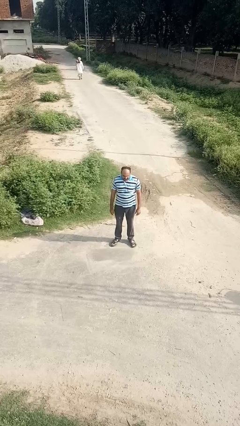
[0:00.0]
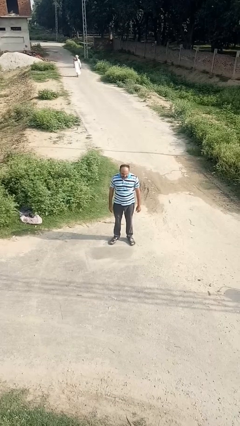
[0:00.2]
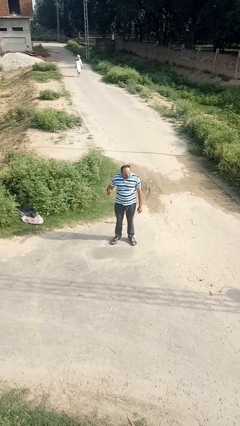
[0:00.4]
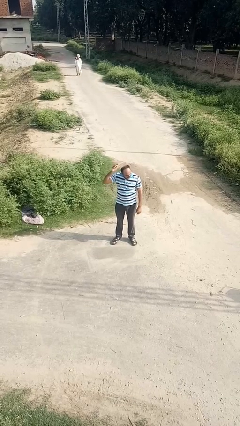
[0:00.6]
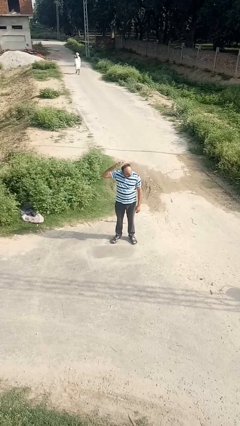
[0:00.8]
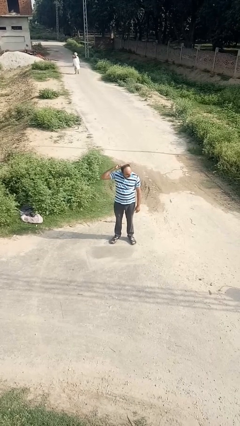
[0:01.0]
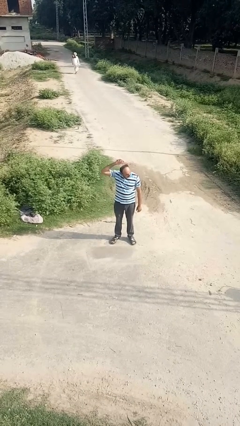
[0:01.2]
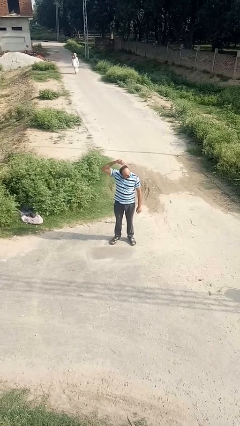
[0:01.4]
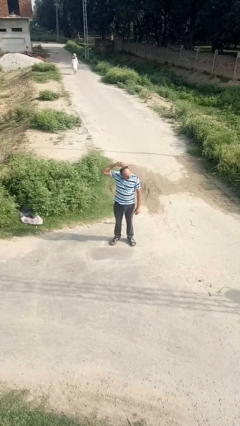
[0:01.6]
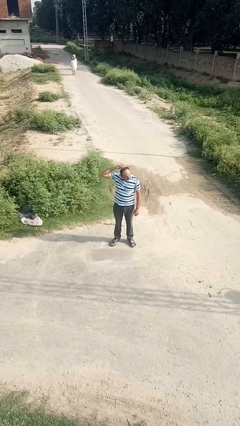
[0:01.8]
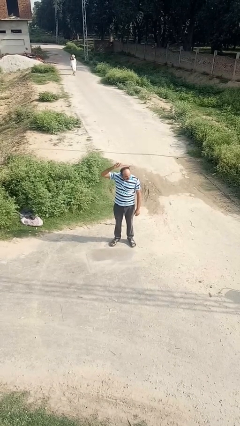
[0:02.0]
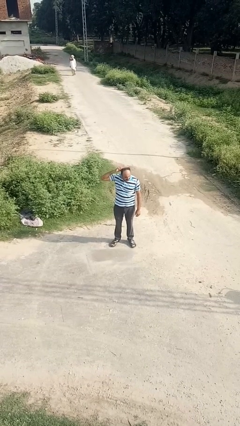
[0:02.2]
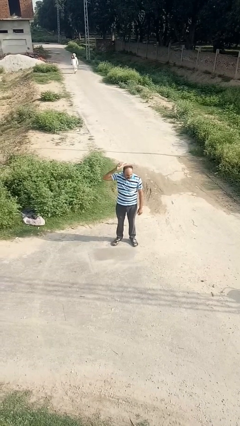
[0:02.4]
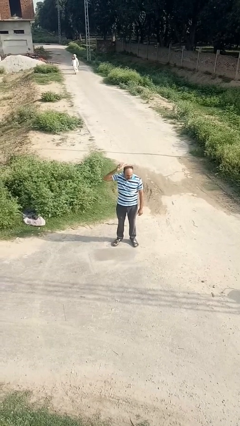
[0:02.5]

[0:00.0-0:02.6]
person brushes hair

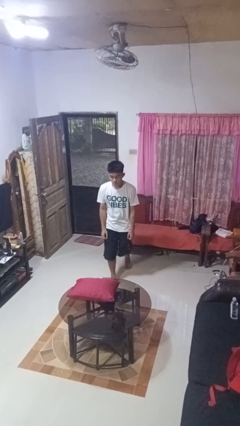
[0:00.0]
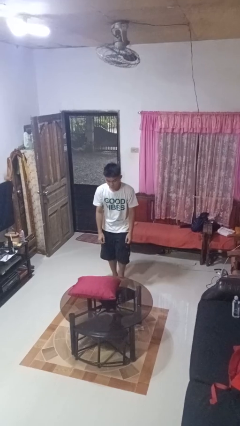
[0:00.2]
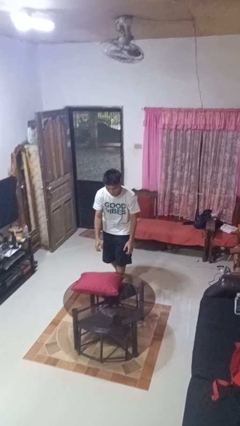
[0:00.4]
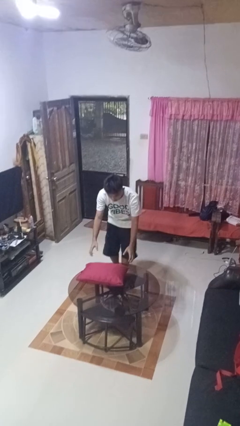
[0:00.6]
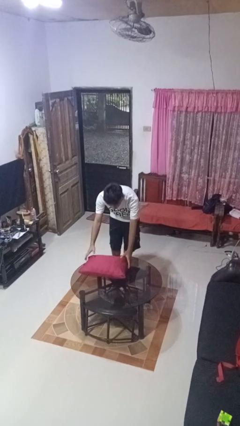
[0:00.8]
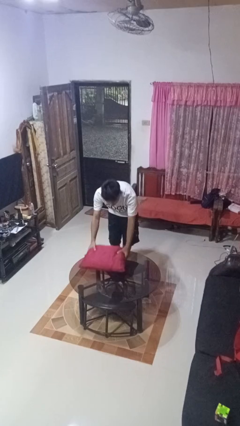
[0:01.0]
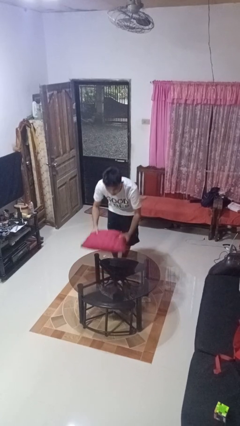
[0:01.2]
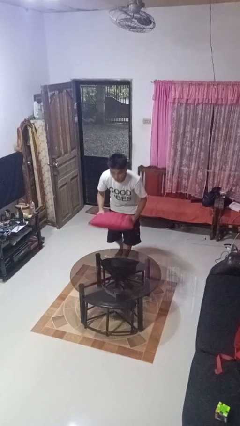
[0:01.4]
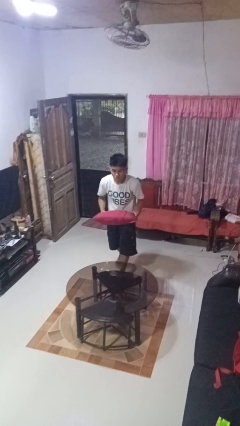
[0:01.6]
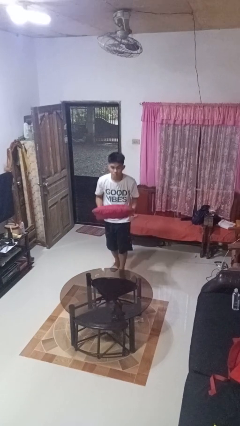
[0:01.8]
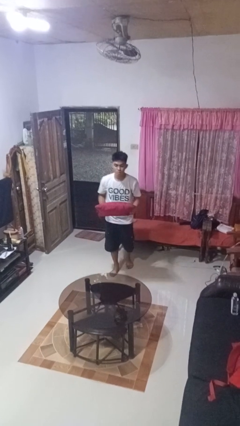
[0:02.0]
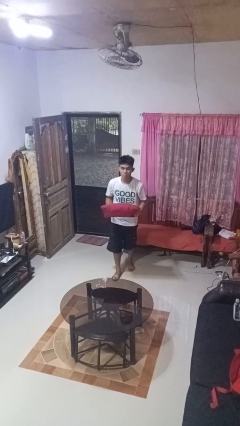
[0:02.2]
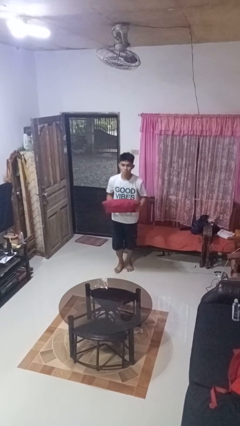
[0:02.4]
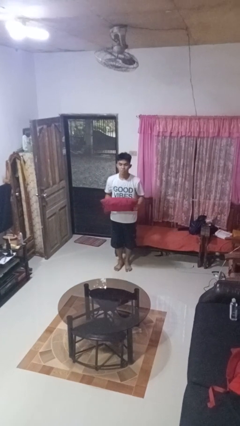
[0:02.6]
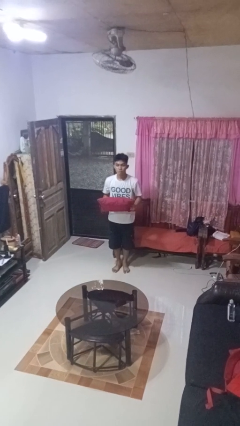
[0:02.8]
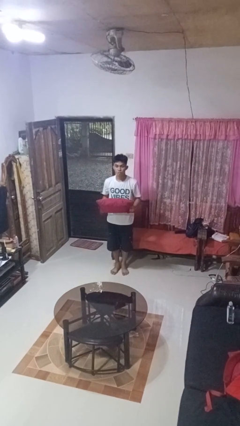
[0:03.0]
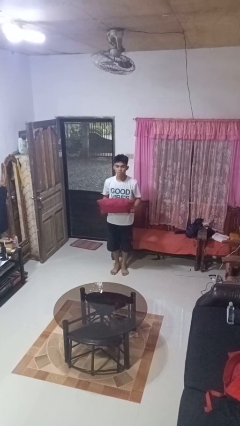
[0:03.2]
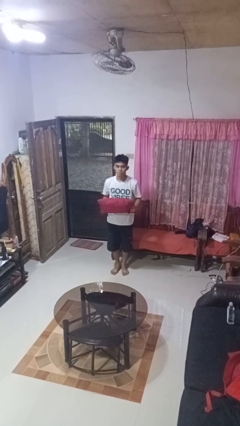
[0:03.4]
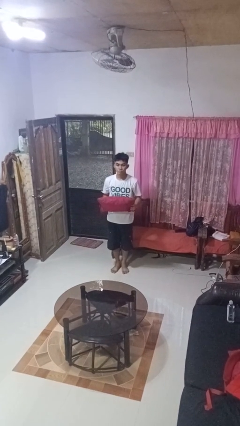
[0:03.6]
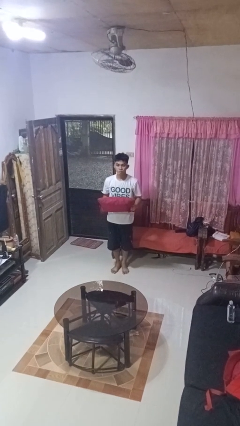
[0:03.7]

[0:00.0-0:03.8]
person picks up object from table

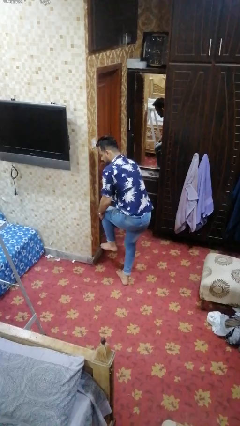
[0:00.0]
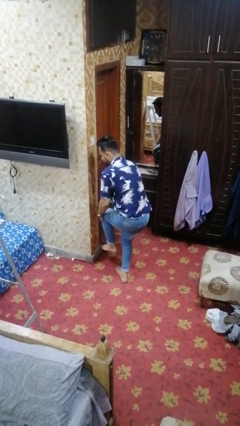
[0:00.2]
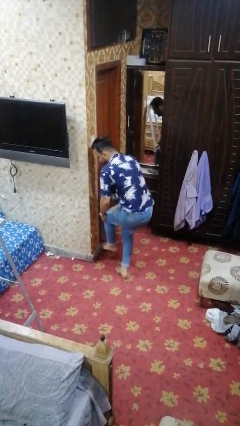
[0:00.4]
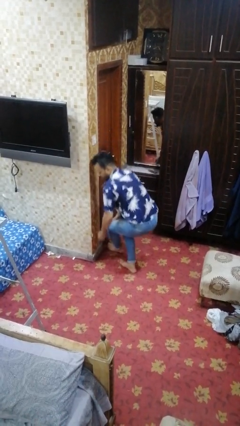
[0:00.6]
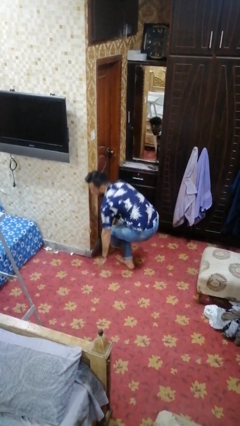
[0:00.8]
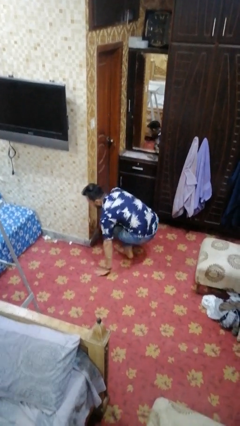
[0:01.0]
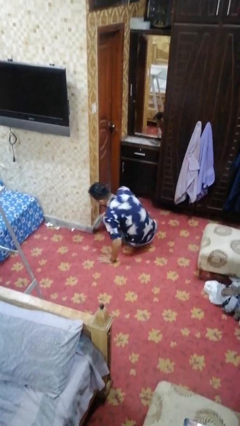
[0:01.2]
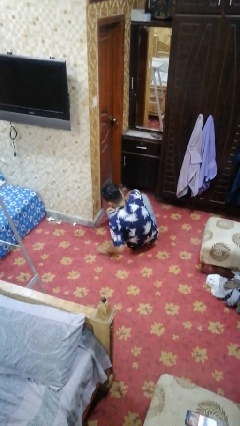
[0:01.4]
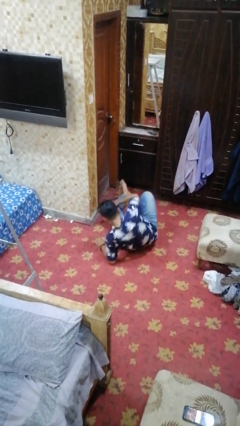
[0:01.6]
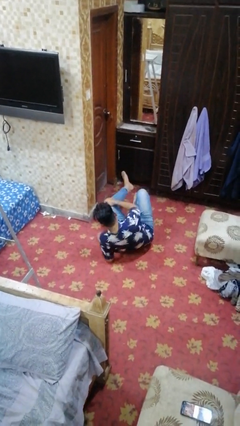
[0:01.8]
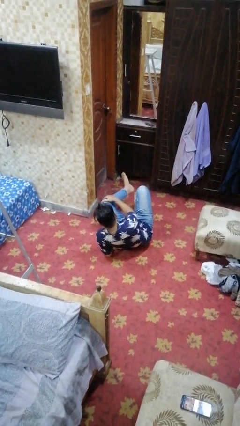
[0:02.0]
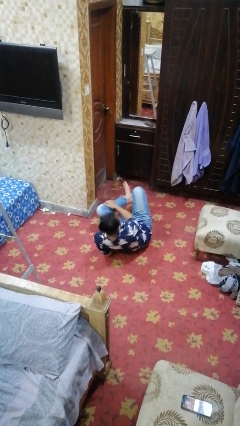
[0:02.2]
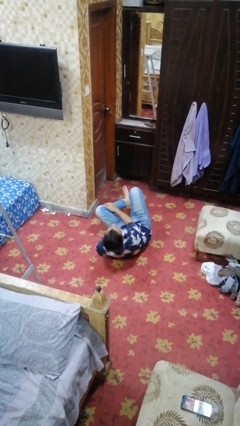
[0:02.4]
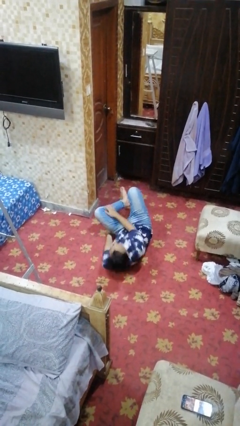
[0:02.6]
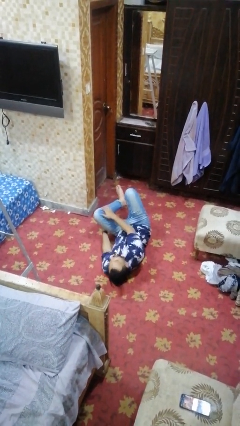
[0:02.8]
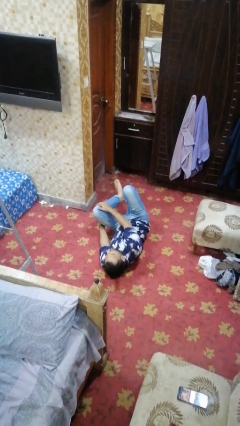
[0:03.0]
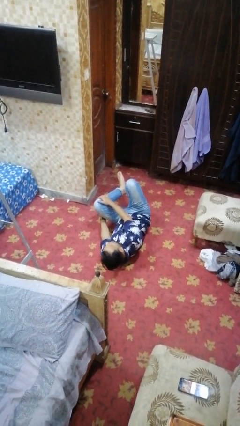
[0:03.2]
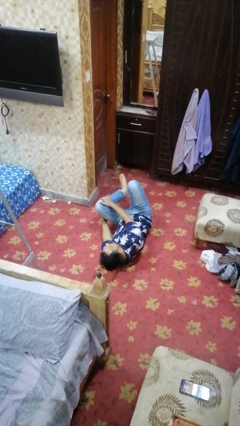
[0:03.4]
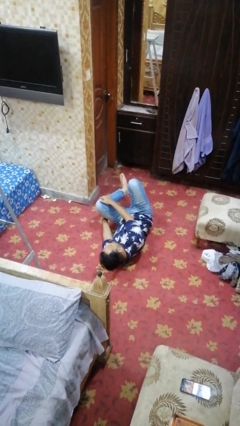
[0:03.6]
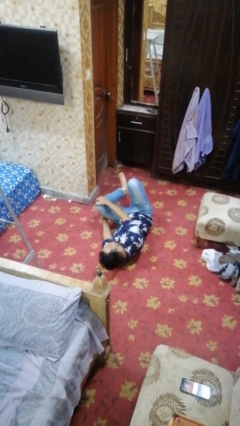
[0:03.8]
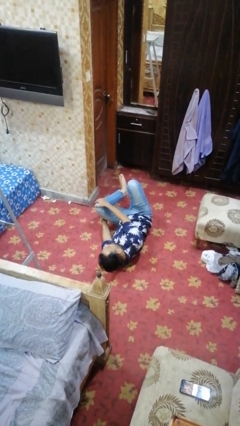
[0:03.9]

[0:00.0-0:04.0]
person lies down on floor

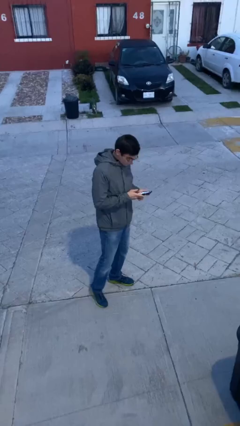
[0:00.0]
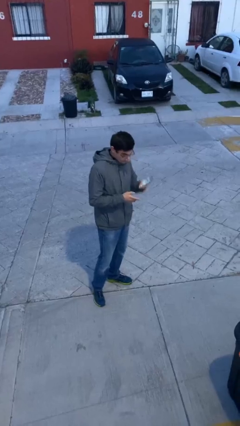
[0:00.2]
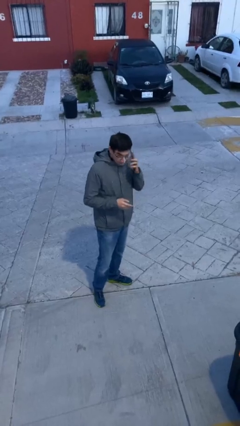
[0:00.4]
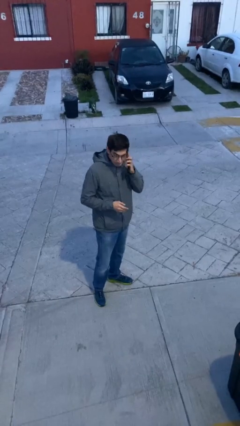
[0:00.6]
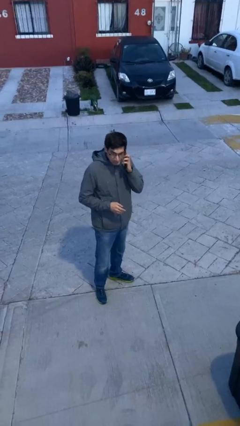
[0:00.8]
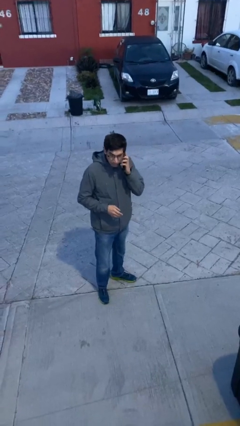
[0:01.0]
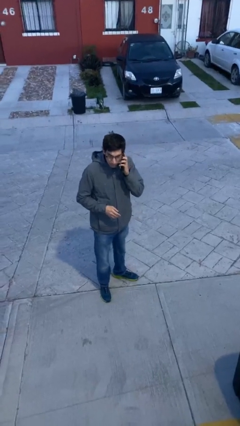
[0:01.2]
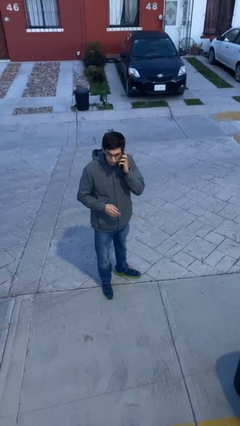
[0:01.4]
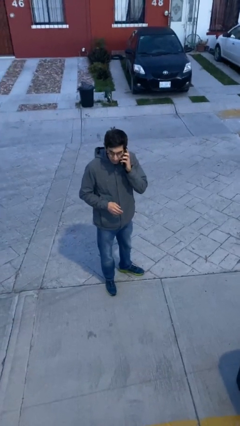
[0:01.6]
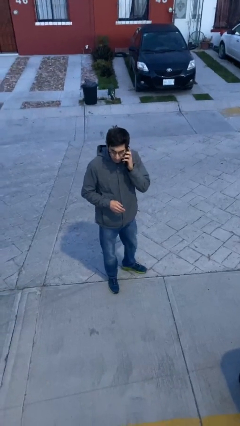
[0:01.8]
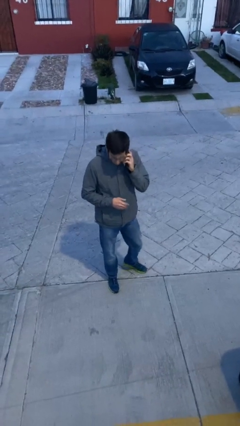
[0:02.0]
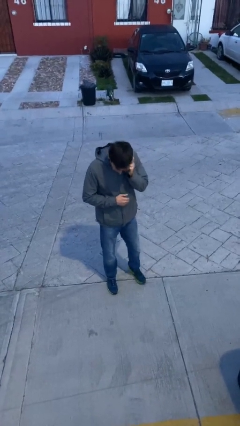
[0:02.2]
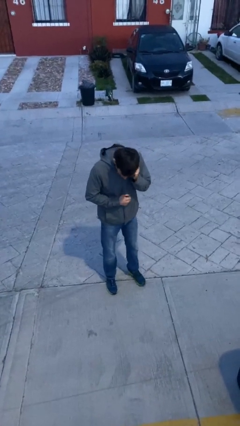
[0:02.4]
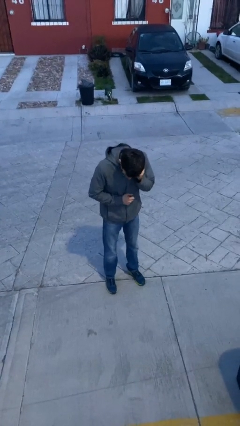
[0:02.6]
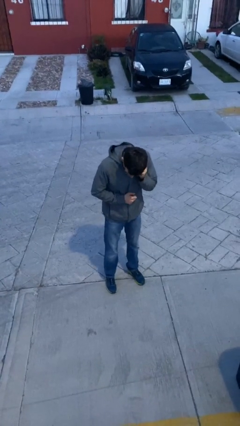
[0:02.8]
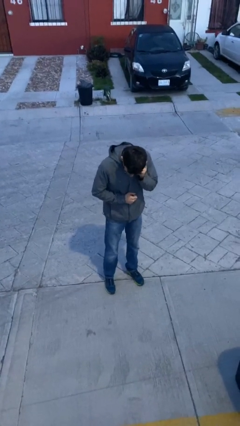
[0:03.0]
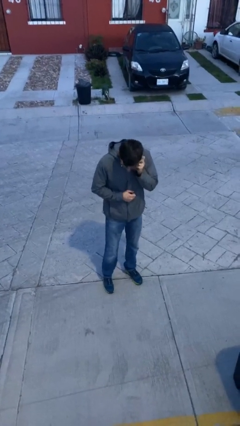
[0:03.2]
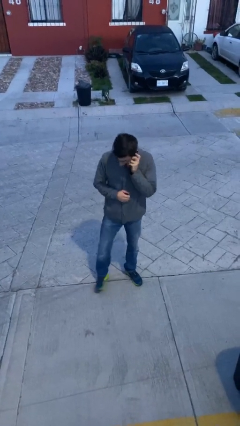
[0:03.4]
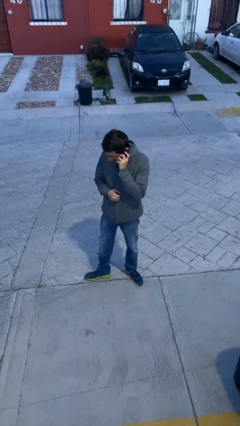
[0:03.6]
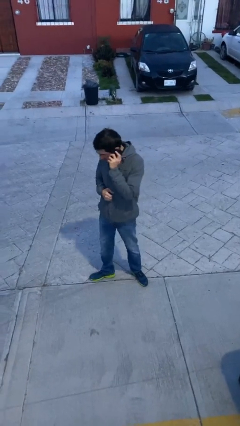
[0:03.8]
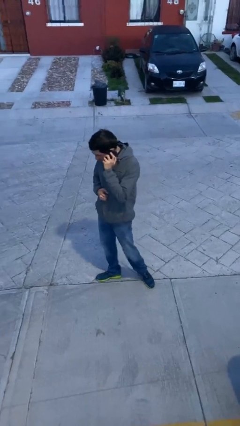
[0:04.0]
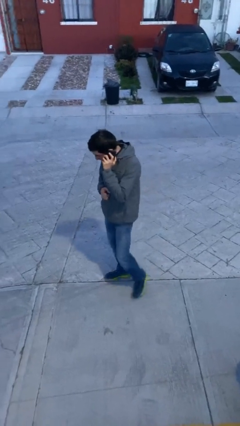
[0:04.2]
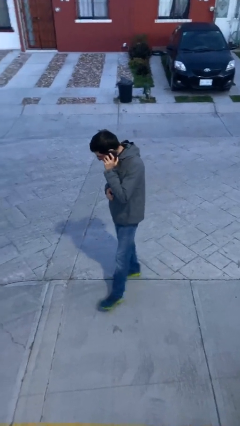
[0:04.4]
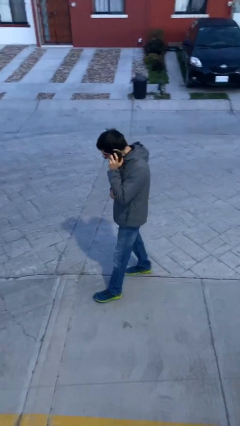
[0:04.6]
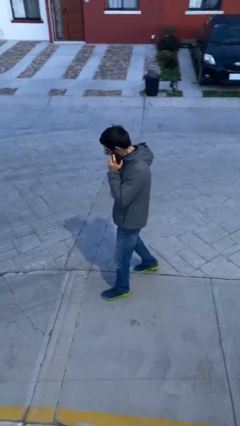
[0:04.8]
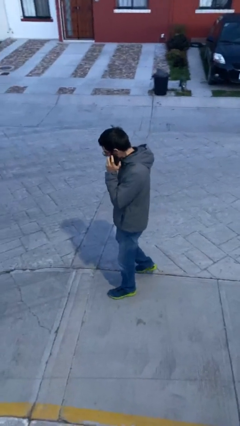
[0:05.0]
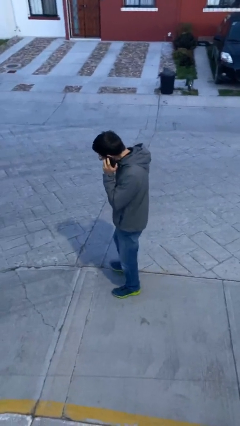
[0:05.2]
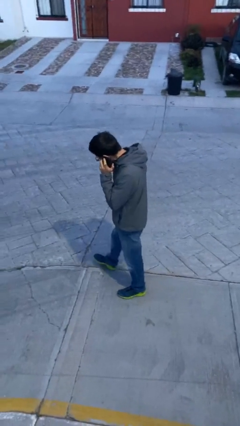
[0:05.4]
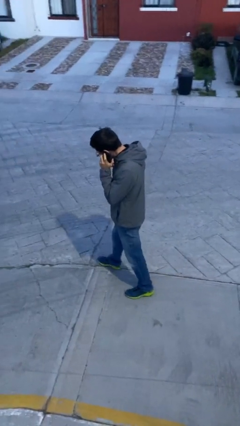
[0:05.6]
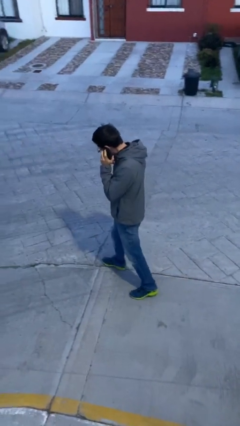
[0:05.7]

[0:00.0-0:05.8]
person talks on phone

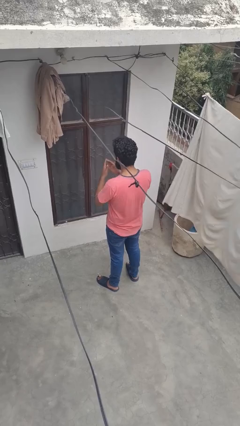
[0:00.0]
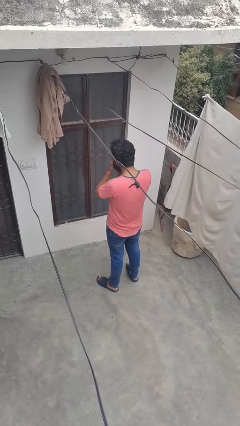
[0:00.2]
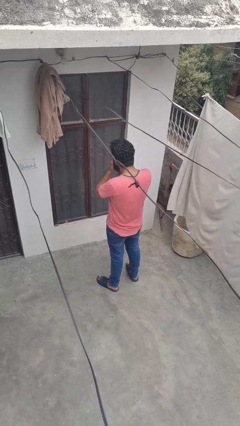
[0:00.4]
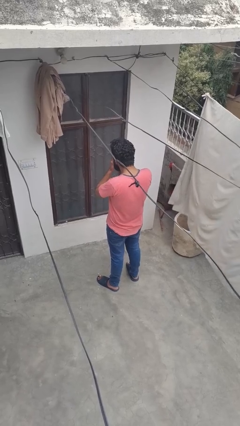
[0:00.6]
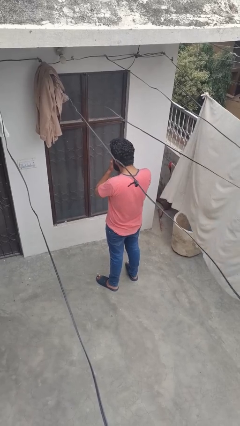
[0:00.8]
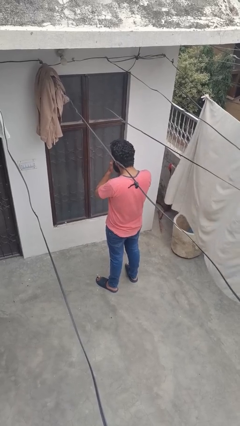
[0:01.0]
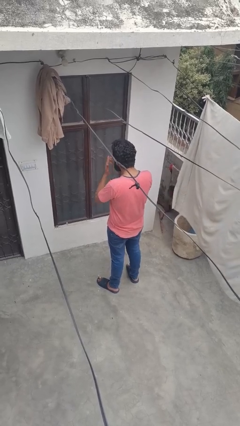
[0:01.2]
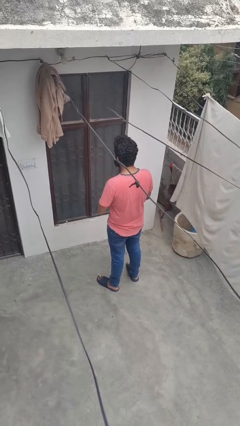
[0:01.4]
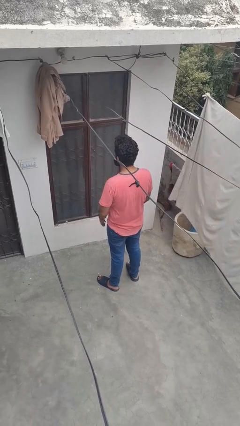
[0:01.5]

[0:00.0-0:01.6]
person covers face with hands
